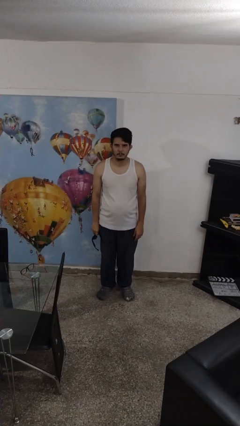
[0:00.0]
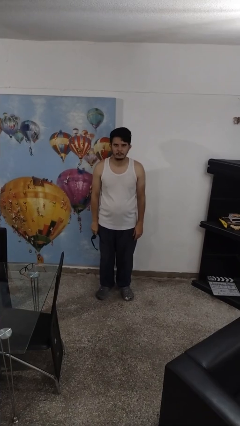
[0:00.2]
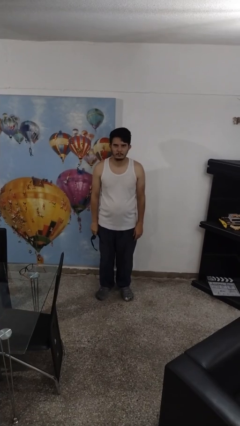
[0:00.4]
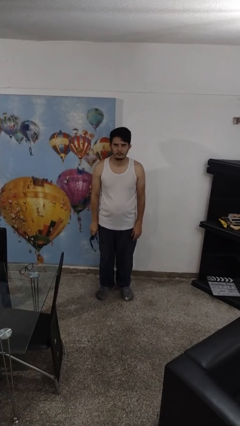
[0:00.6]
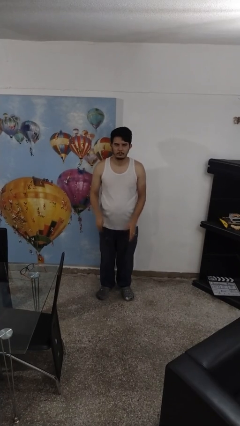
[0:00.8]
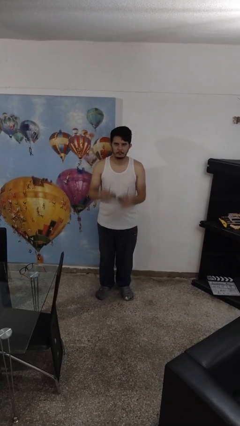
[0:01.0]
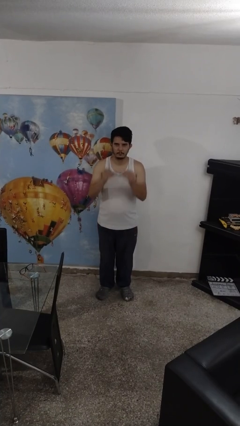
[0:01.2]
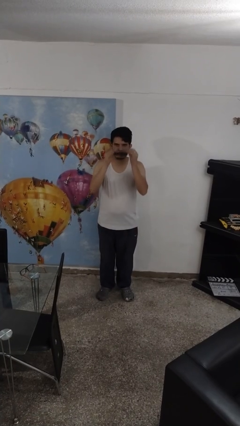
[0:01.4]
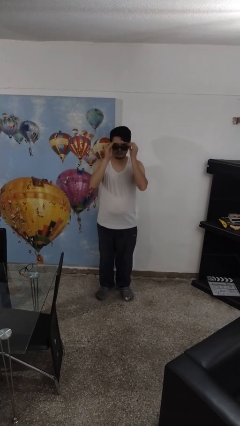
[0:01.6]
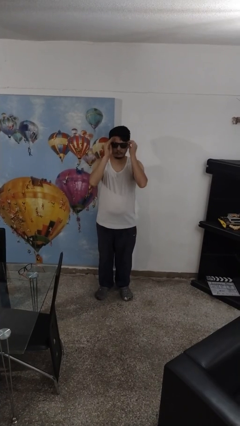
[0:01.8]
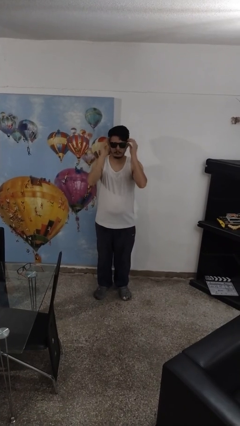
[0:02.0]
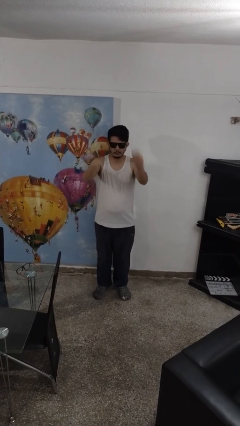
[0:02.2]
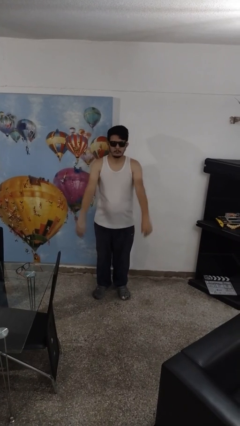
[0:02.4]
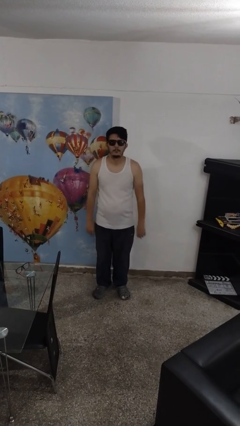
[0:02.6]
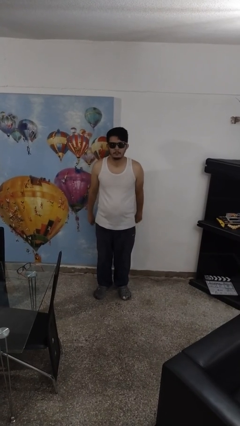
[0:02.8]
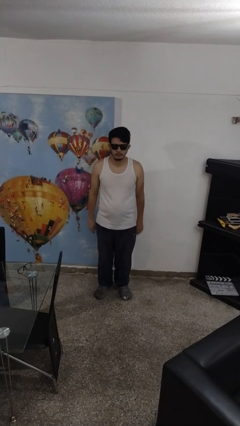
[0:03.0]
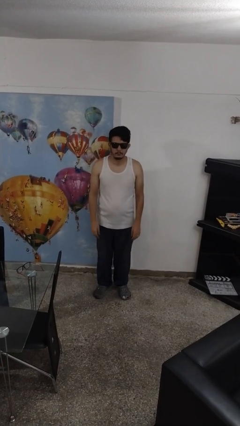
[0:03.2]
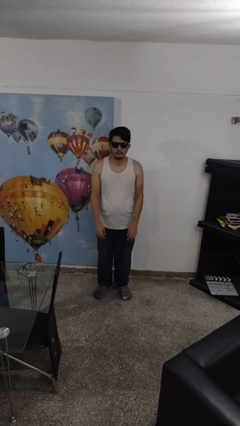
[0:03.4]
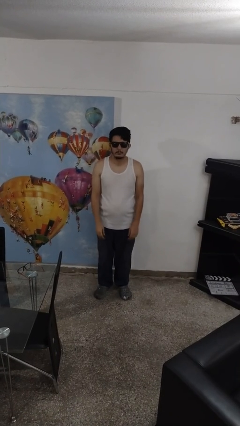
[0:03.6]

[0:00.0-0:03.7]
person puts on sunglasses

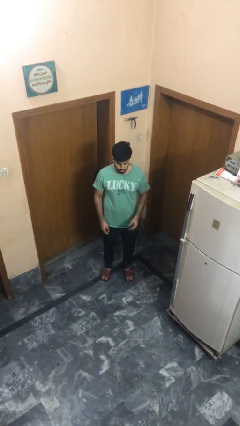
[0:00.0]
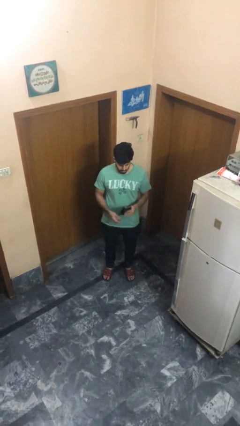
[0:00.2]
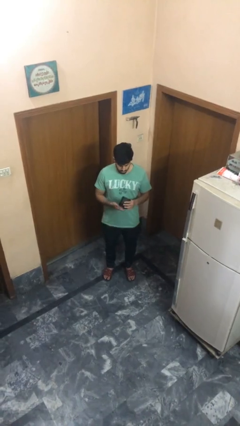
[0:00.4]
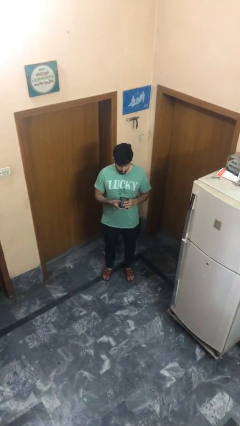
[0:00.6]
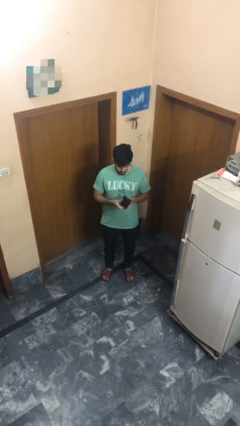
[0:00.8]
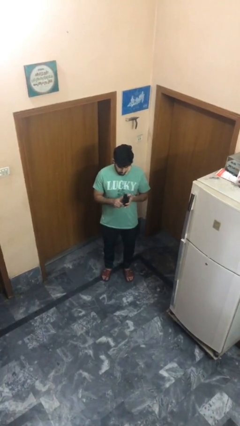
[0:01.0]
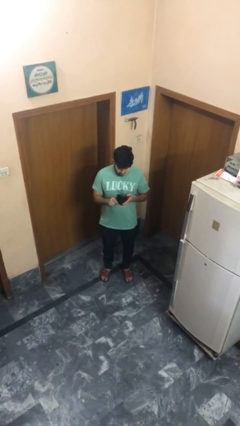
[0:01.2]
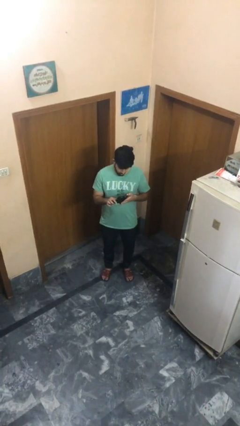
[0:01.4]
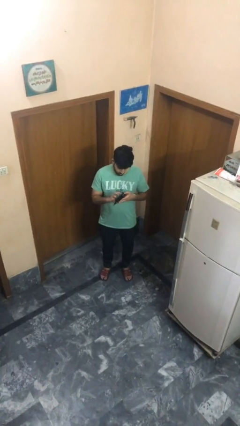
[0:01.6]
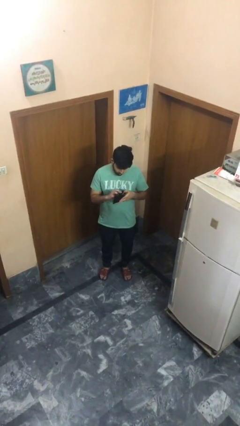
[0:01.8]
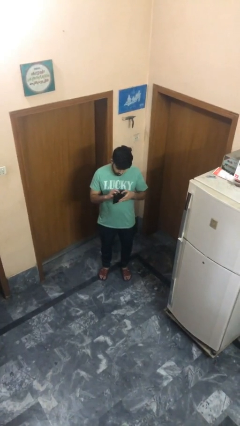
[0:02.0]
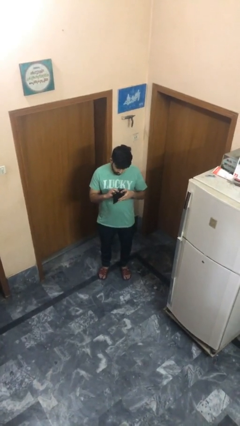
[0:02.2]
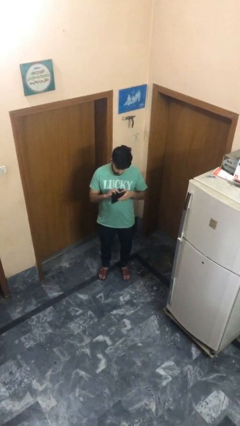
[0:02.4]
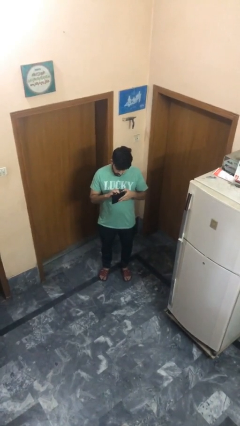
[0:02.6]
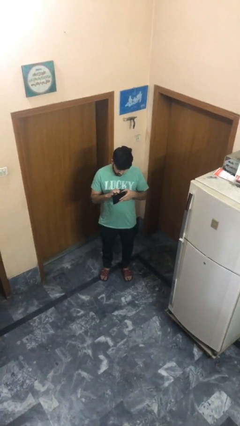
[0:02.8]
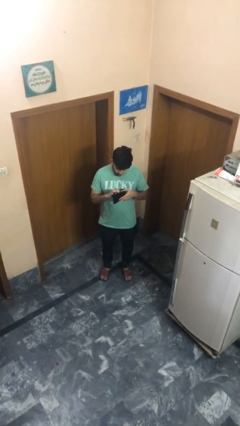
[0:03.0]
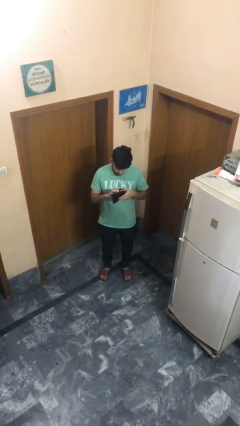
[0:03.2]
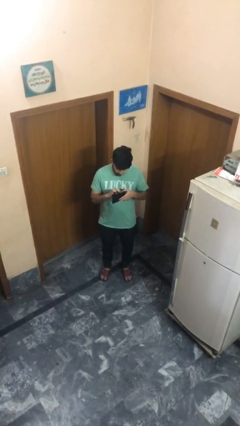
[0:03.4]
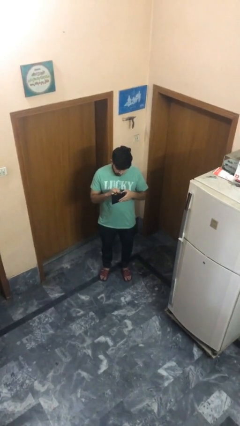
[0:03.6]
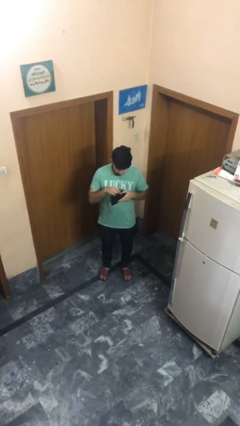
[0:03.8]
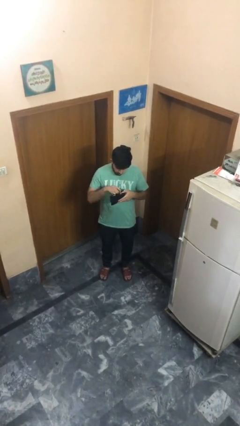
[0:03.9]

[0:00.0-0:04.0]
person searches in purse

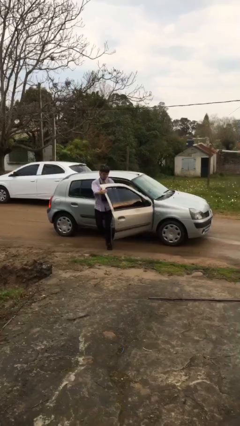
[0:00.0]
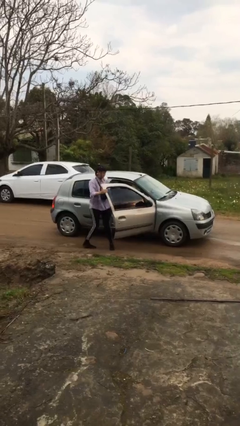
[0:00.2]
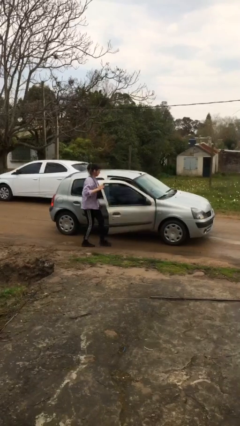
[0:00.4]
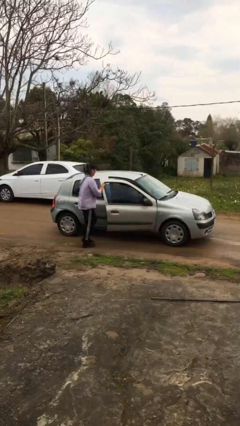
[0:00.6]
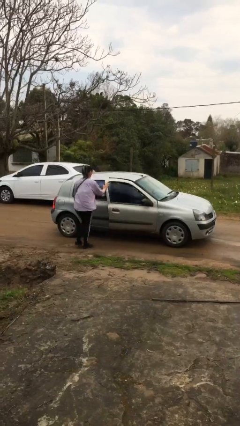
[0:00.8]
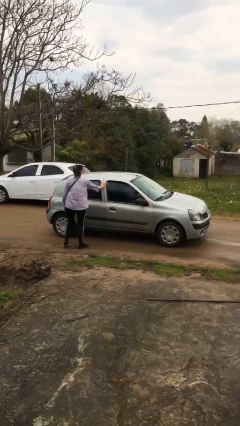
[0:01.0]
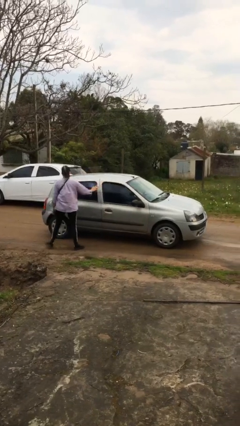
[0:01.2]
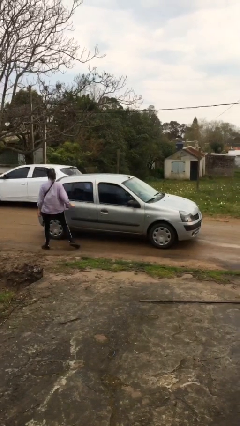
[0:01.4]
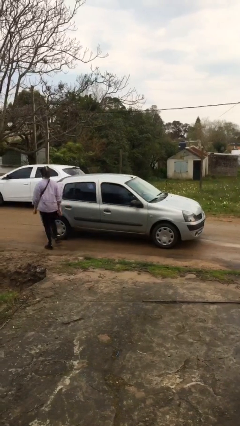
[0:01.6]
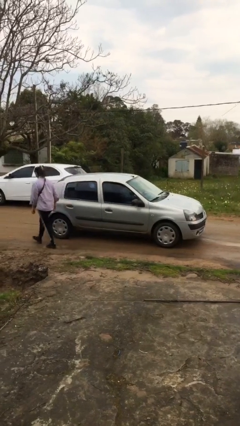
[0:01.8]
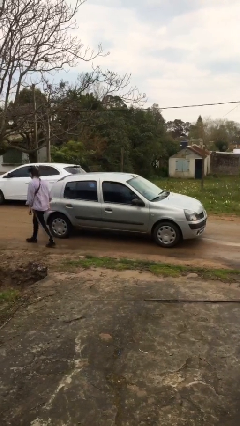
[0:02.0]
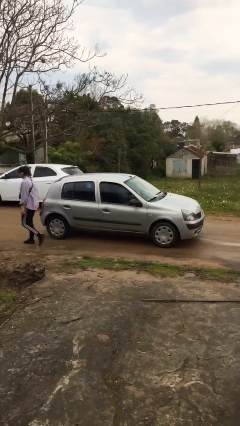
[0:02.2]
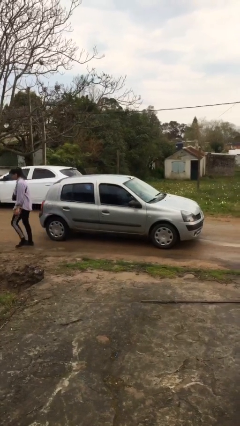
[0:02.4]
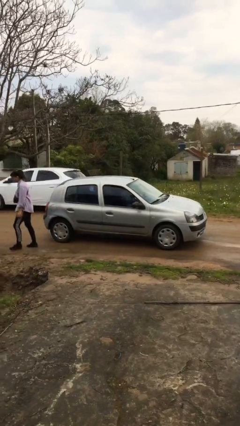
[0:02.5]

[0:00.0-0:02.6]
car drops off person

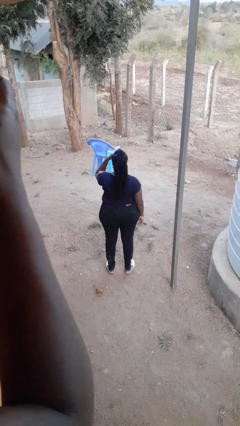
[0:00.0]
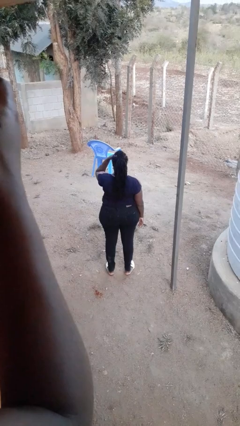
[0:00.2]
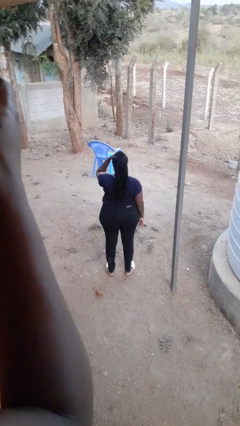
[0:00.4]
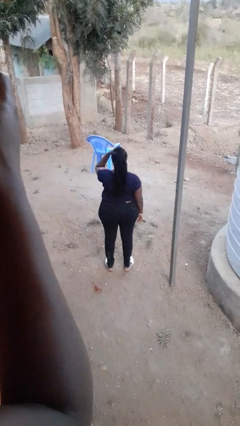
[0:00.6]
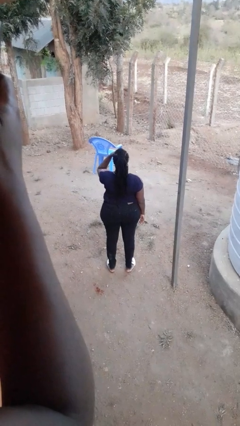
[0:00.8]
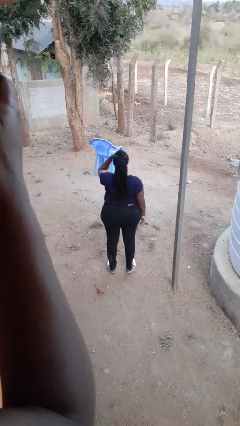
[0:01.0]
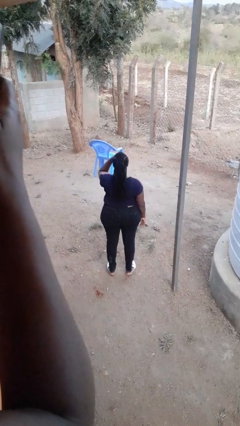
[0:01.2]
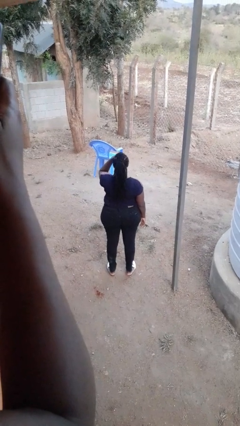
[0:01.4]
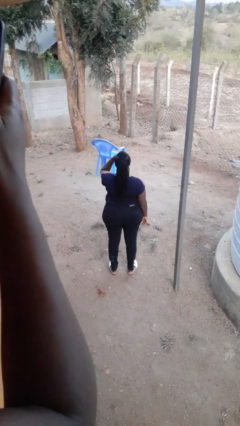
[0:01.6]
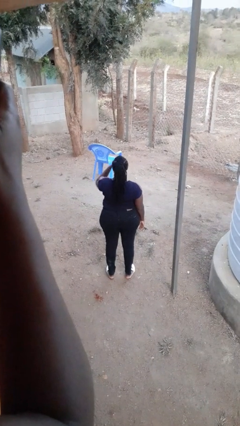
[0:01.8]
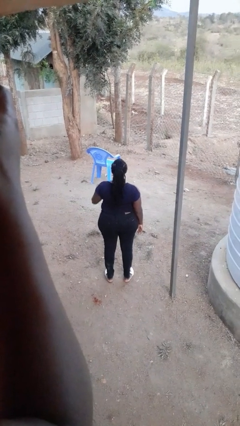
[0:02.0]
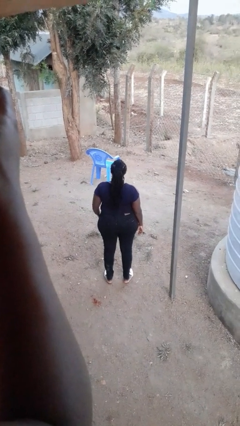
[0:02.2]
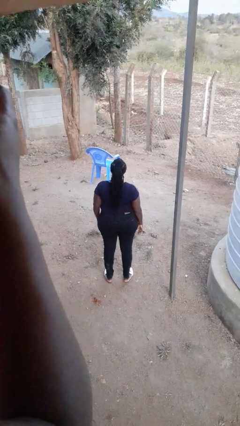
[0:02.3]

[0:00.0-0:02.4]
person shades eyes

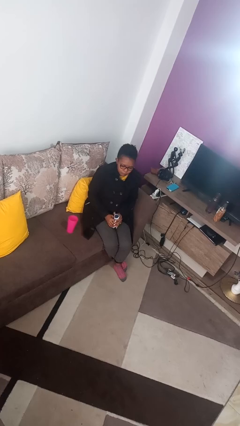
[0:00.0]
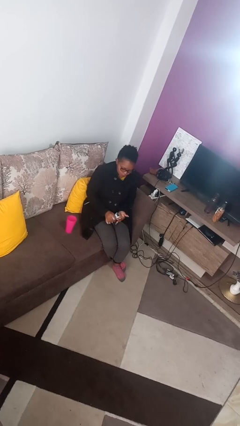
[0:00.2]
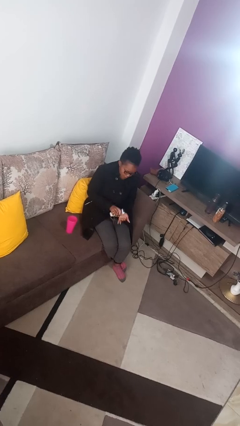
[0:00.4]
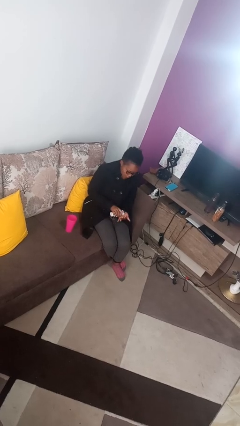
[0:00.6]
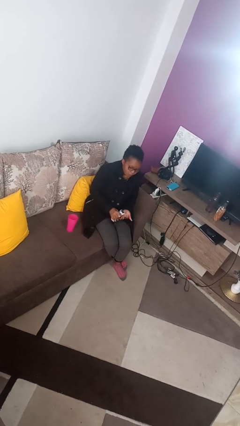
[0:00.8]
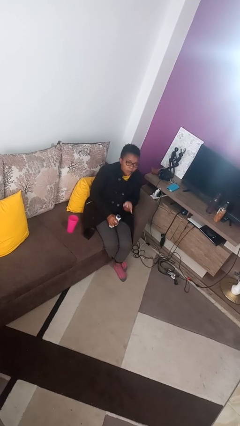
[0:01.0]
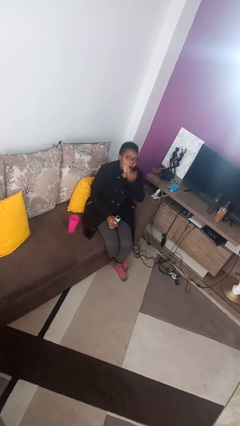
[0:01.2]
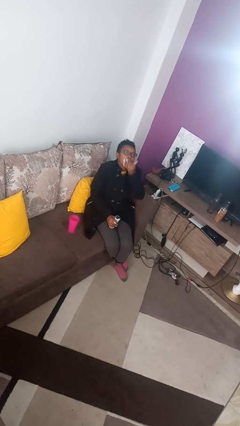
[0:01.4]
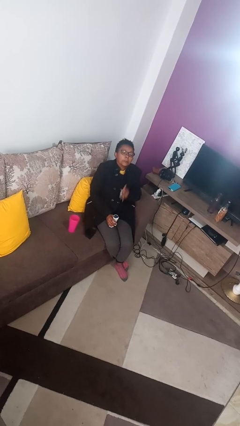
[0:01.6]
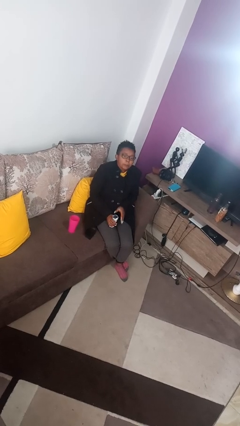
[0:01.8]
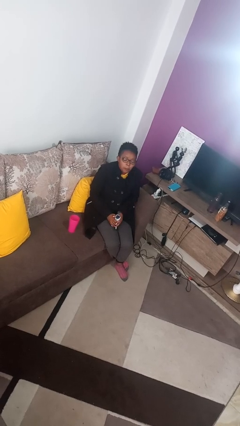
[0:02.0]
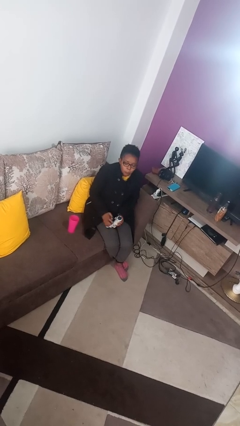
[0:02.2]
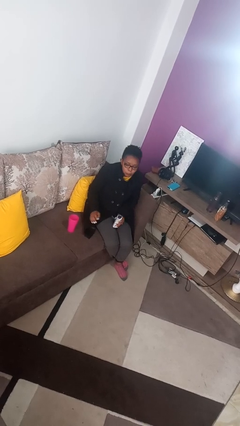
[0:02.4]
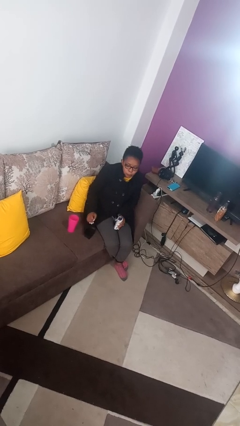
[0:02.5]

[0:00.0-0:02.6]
person takes medicine pills

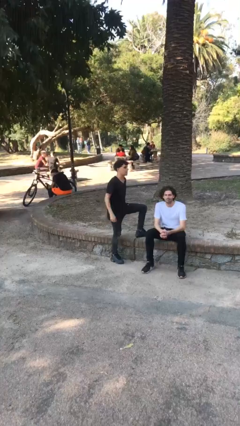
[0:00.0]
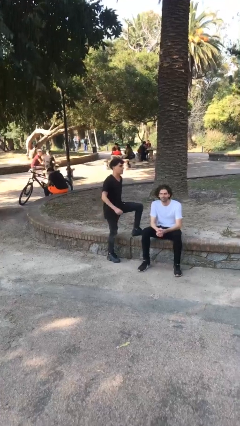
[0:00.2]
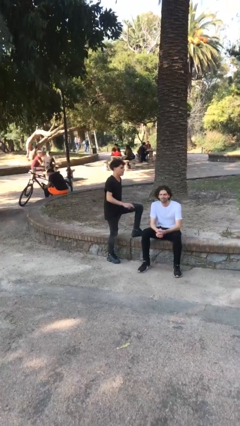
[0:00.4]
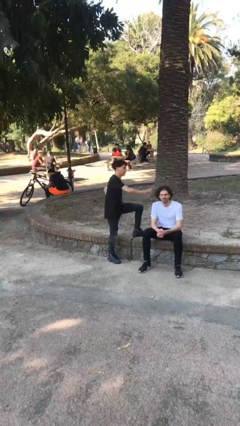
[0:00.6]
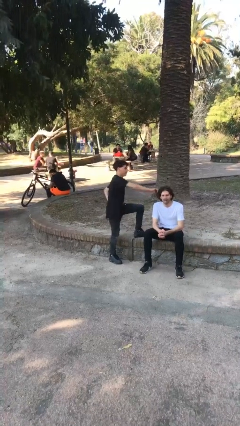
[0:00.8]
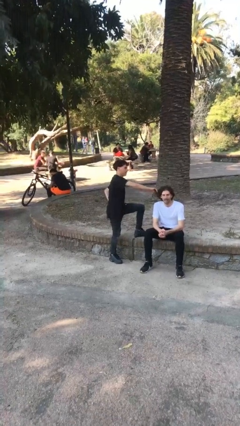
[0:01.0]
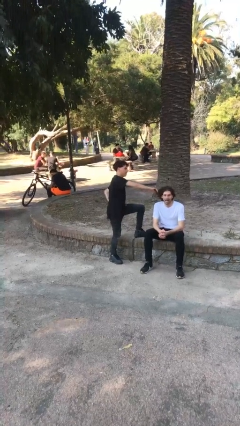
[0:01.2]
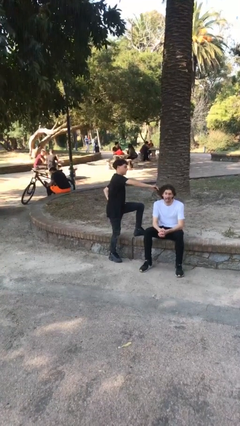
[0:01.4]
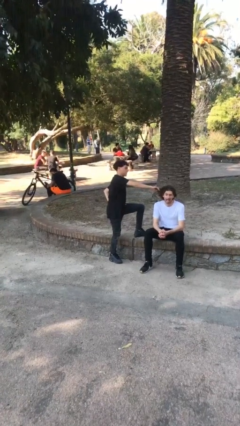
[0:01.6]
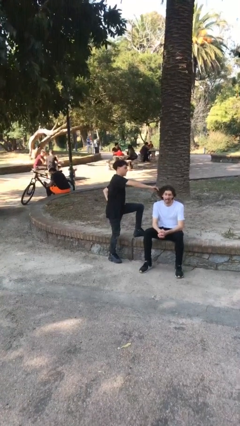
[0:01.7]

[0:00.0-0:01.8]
person grabs person by hair

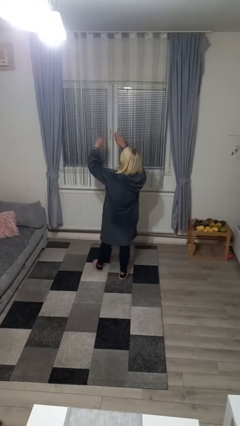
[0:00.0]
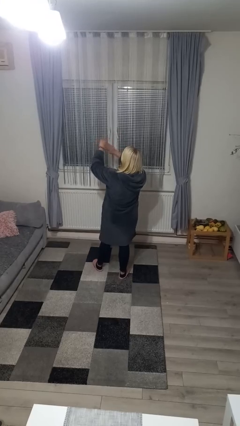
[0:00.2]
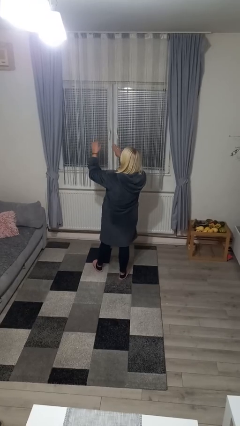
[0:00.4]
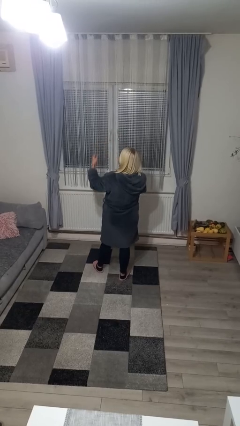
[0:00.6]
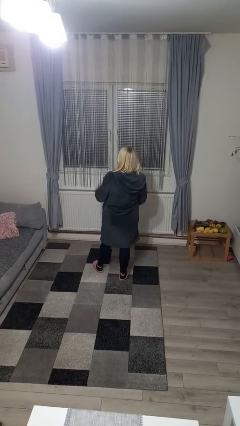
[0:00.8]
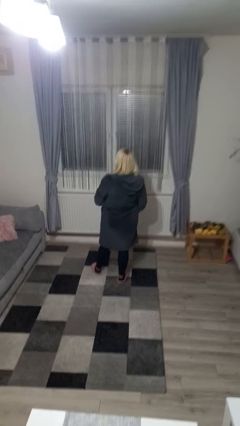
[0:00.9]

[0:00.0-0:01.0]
person swats bug
